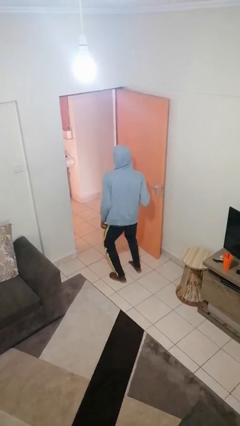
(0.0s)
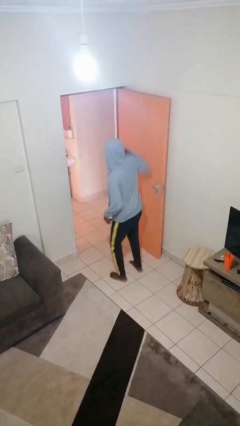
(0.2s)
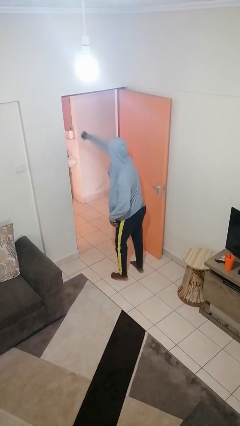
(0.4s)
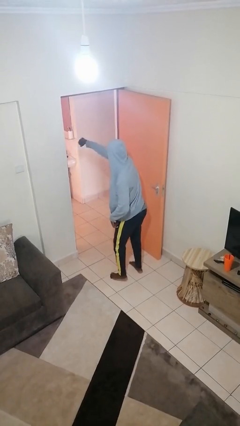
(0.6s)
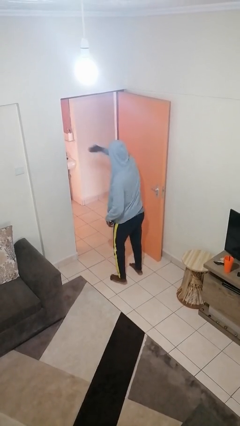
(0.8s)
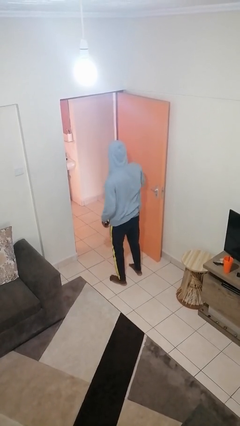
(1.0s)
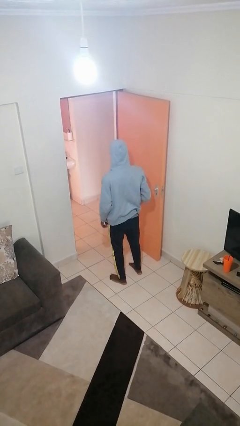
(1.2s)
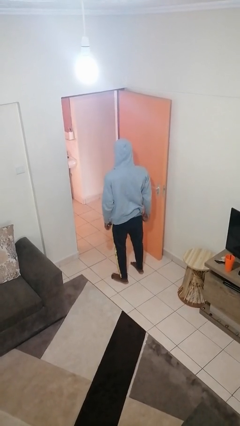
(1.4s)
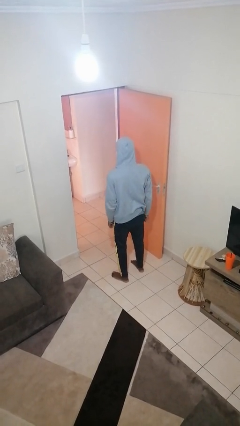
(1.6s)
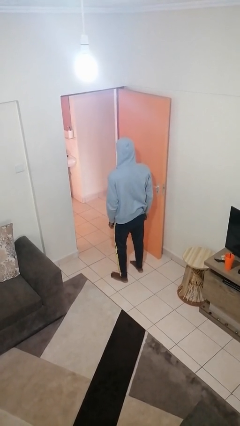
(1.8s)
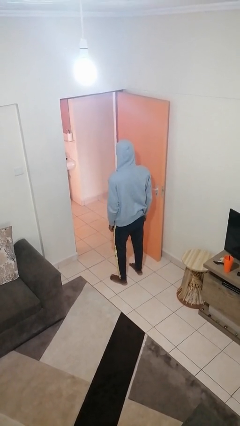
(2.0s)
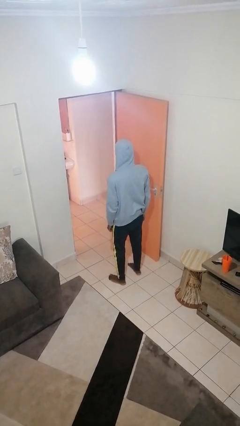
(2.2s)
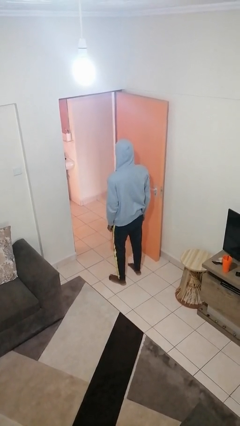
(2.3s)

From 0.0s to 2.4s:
person punches

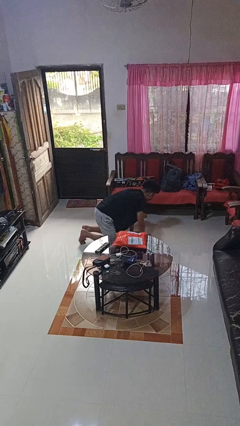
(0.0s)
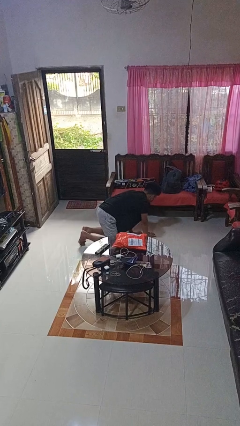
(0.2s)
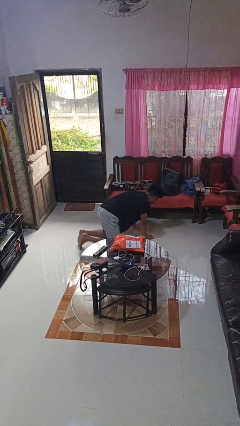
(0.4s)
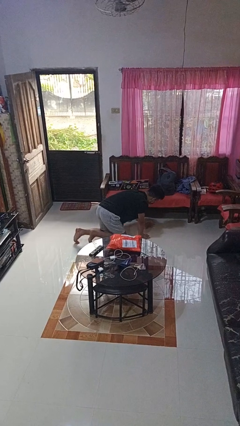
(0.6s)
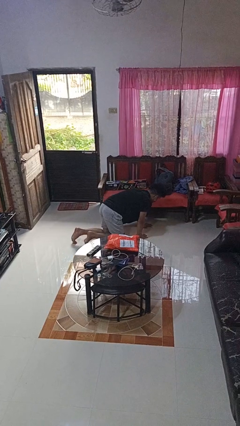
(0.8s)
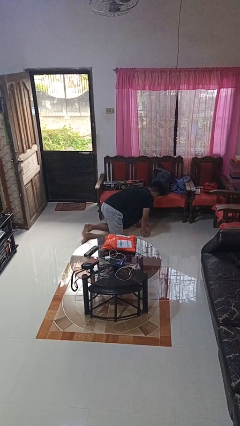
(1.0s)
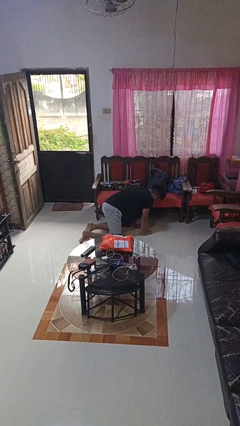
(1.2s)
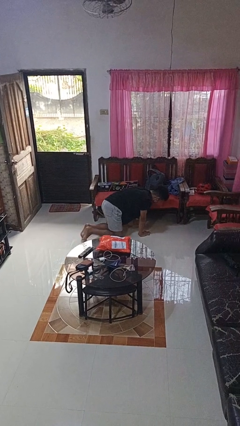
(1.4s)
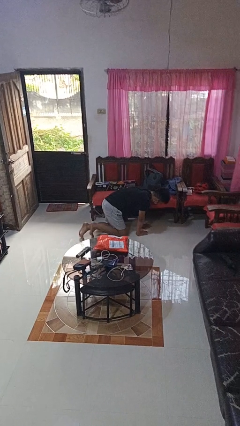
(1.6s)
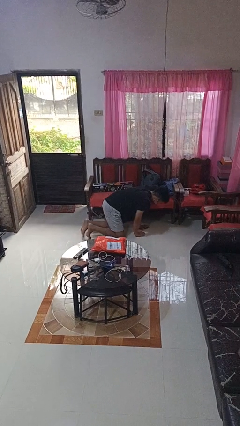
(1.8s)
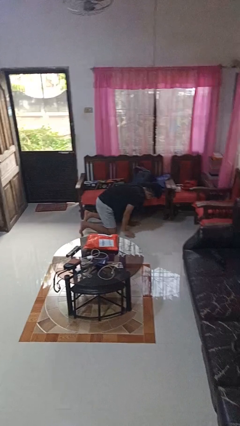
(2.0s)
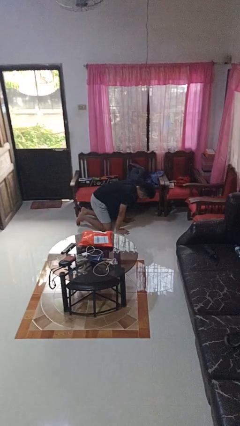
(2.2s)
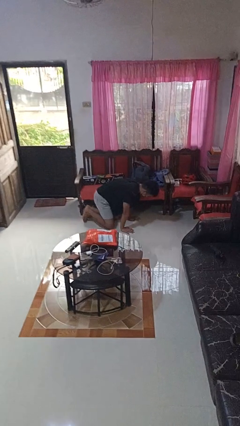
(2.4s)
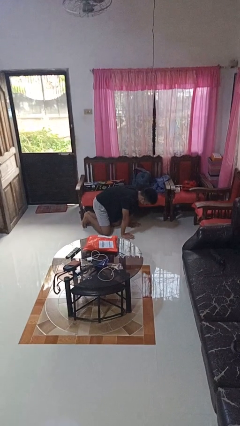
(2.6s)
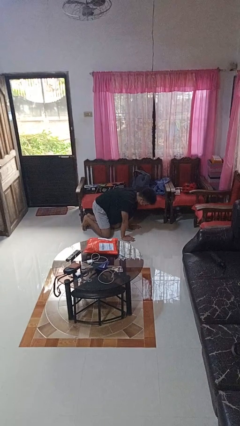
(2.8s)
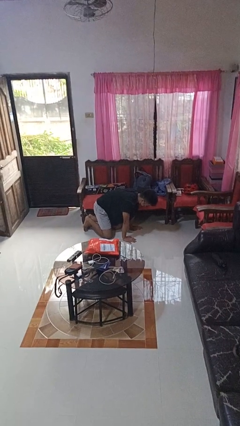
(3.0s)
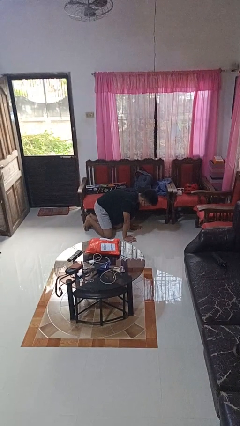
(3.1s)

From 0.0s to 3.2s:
person crawls

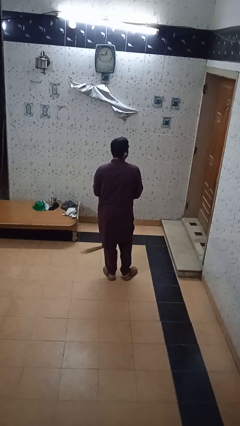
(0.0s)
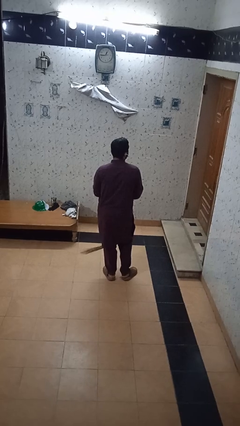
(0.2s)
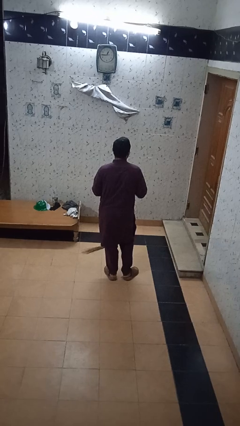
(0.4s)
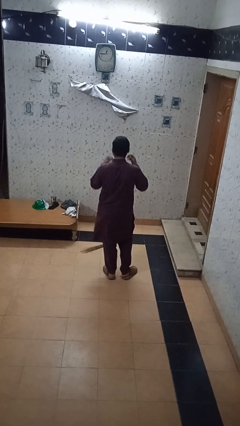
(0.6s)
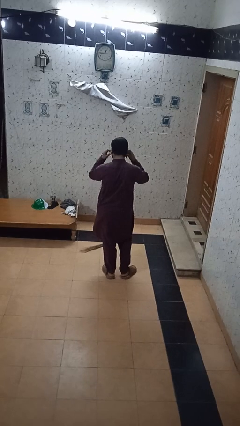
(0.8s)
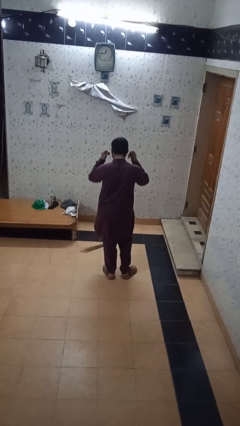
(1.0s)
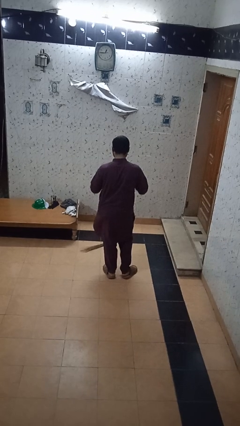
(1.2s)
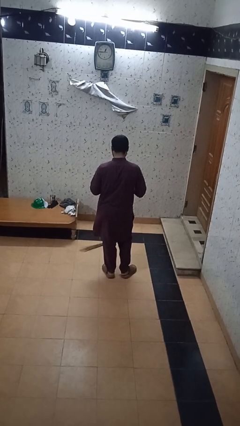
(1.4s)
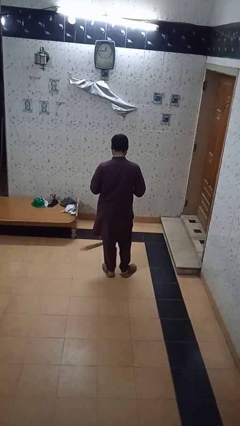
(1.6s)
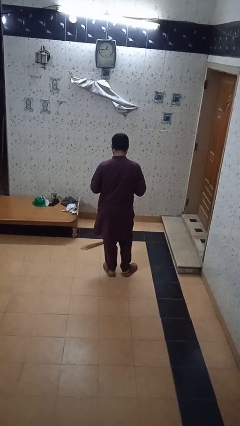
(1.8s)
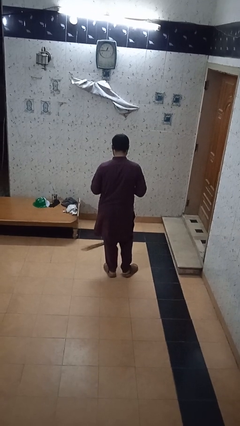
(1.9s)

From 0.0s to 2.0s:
person takes off headphones

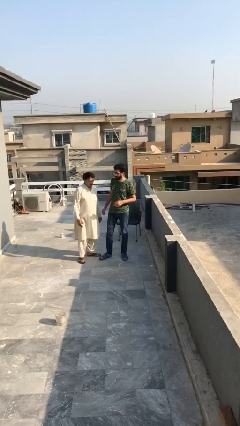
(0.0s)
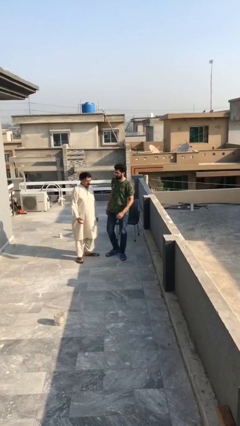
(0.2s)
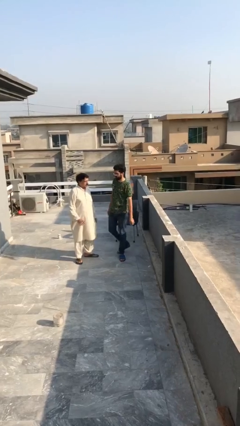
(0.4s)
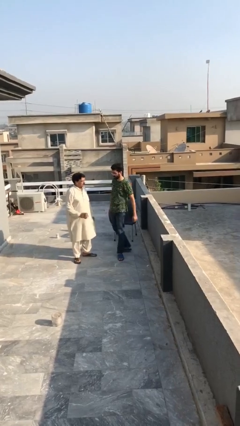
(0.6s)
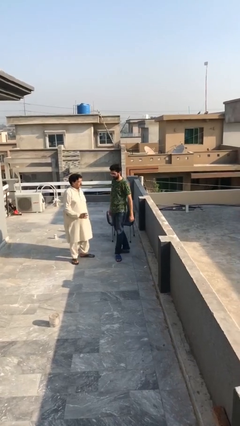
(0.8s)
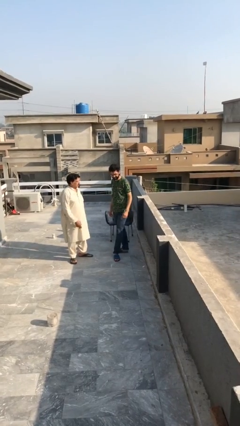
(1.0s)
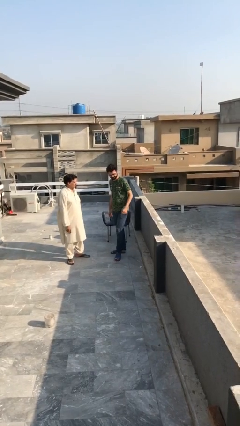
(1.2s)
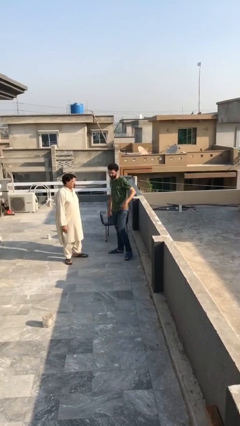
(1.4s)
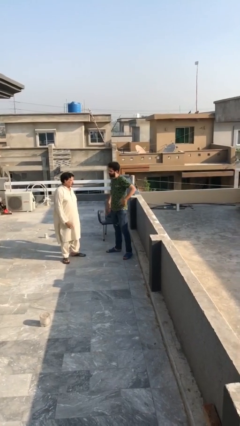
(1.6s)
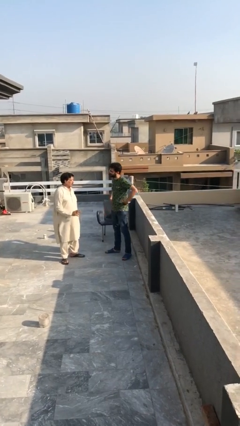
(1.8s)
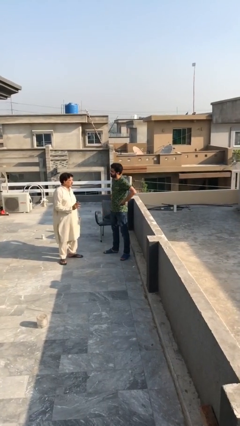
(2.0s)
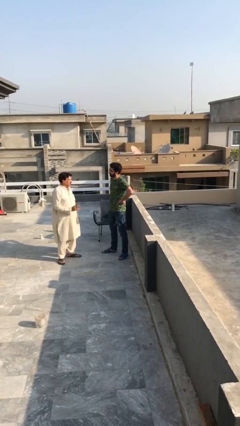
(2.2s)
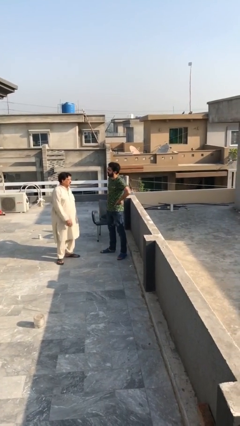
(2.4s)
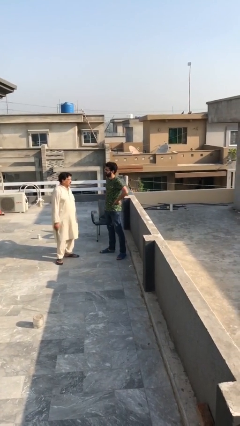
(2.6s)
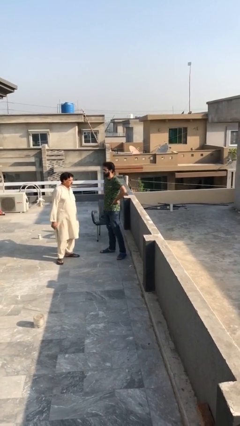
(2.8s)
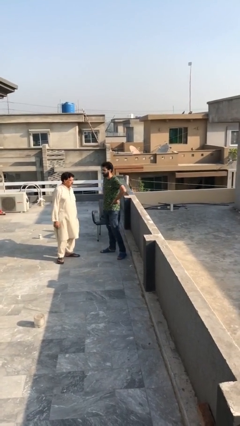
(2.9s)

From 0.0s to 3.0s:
person talks to person

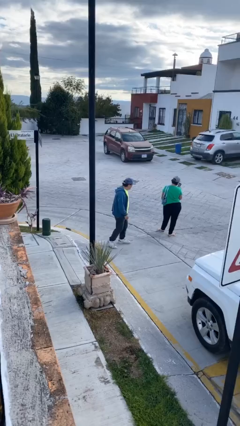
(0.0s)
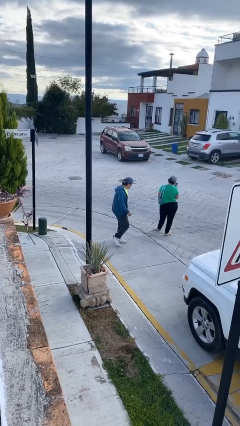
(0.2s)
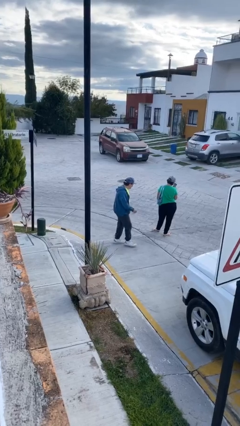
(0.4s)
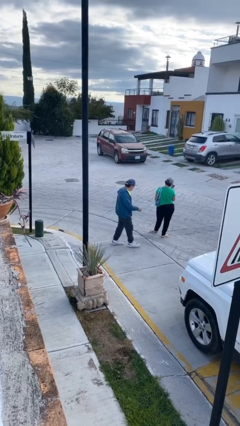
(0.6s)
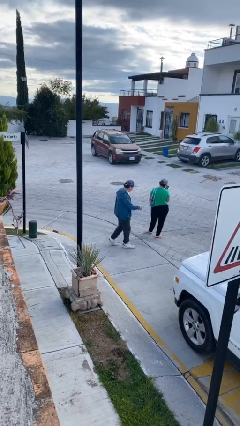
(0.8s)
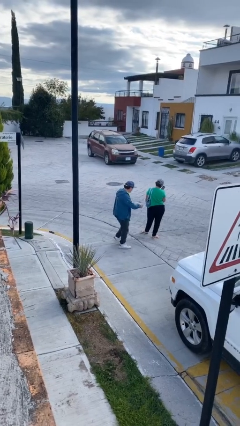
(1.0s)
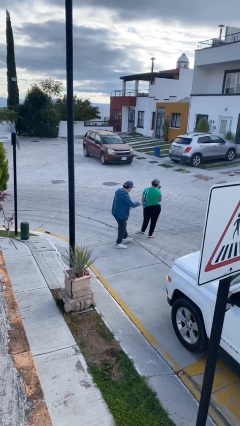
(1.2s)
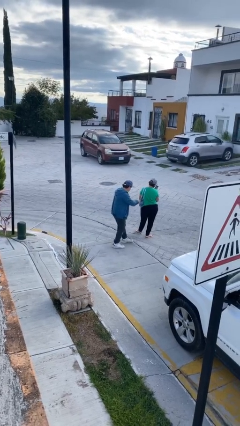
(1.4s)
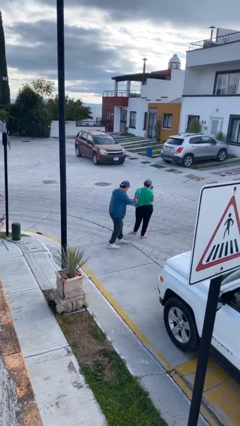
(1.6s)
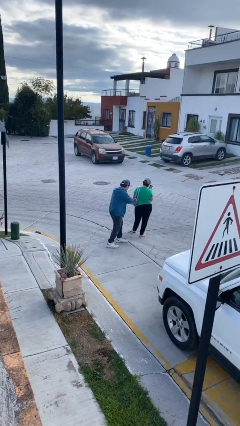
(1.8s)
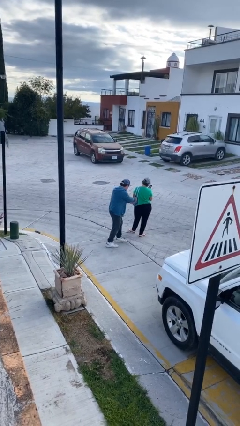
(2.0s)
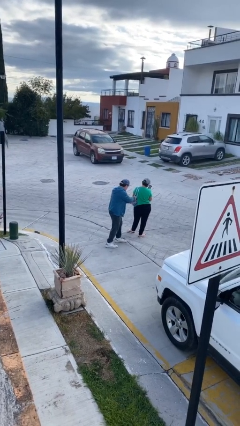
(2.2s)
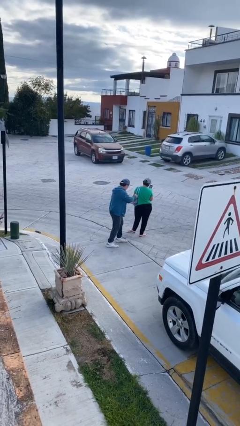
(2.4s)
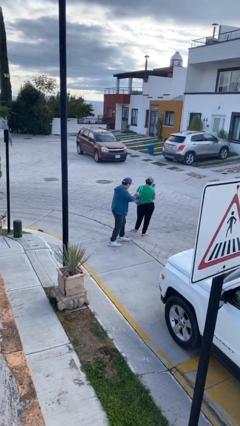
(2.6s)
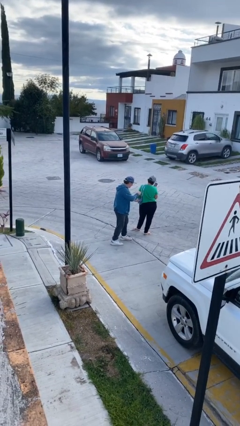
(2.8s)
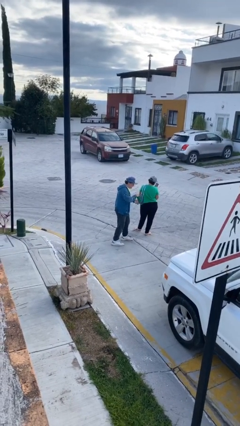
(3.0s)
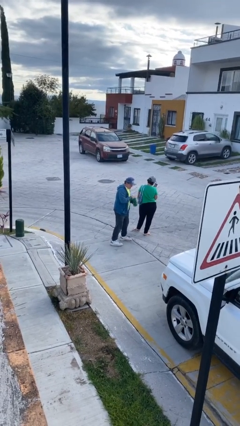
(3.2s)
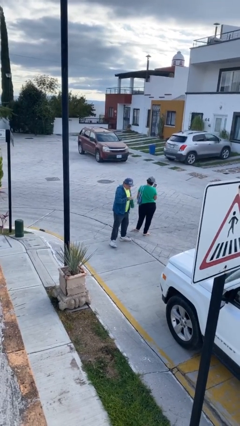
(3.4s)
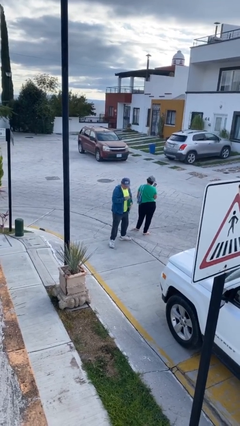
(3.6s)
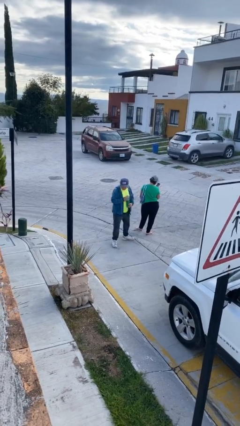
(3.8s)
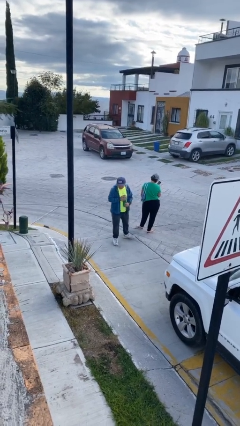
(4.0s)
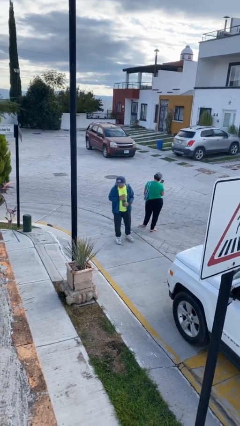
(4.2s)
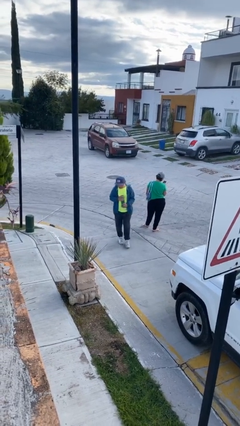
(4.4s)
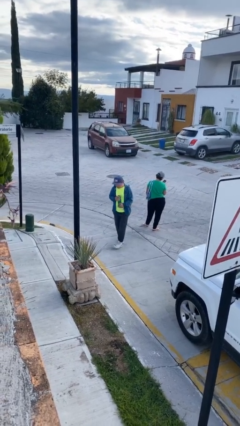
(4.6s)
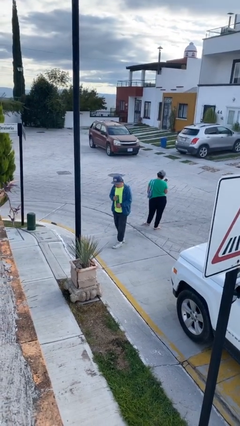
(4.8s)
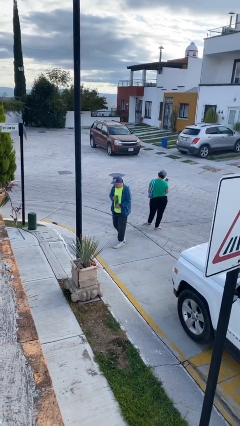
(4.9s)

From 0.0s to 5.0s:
person steals object from person

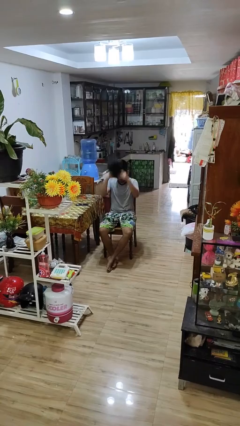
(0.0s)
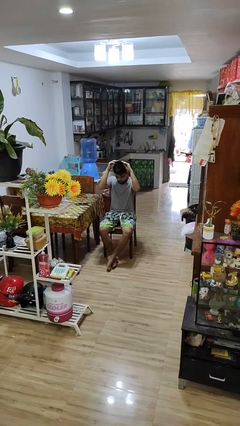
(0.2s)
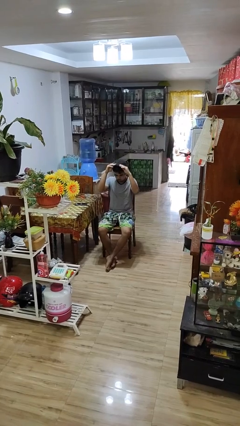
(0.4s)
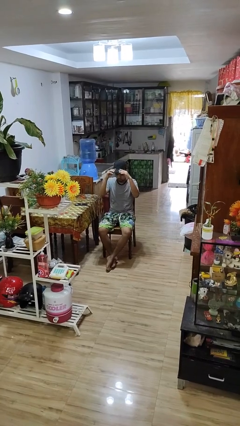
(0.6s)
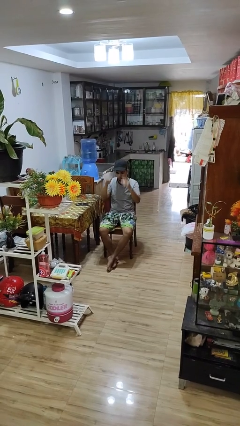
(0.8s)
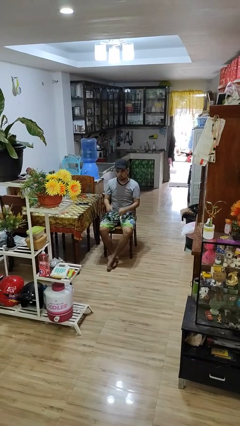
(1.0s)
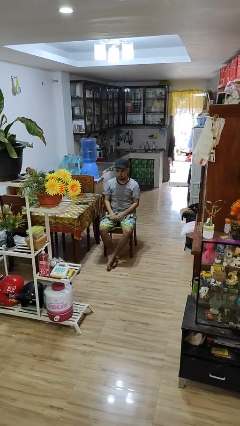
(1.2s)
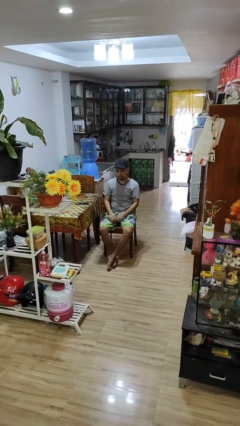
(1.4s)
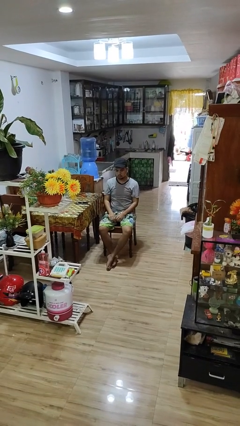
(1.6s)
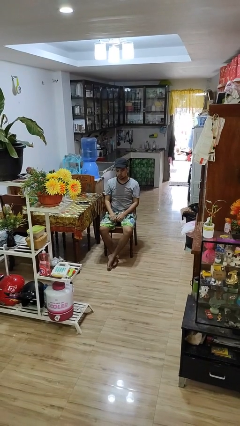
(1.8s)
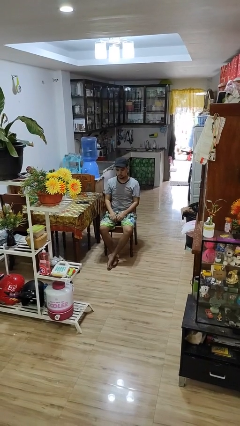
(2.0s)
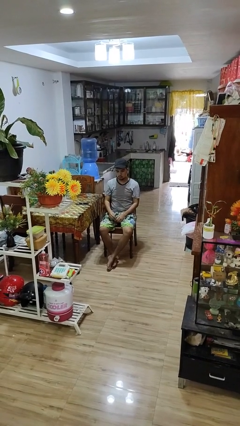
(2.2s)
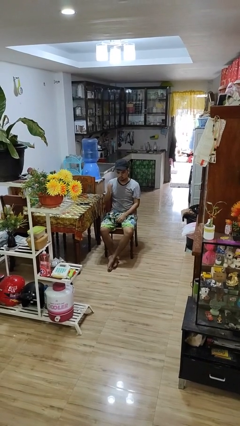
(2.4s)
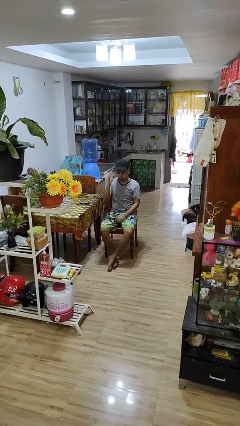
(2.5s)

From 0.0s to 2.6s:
person puts on hat
